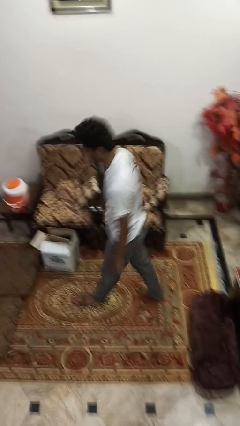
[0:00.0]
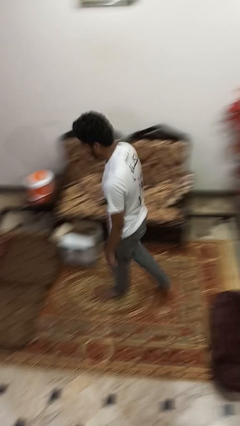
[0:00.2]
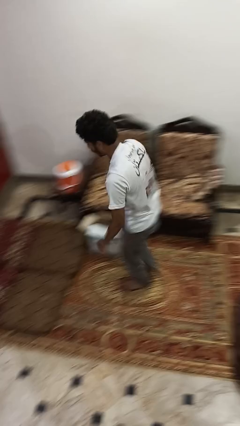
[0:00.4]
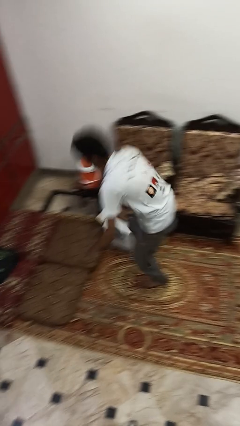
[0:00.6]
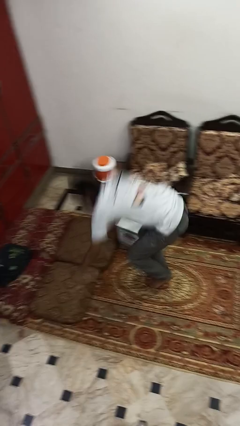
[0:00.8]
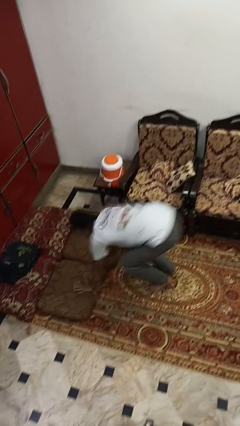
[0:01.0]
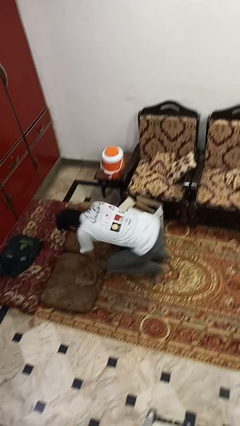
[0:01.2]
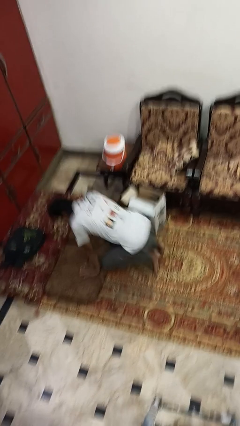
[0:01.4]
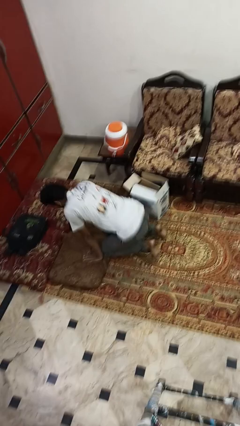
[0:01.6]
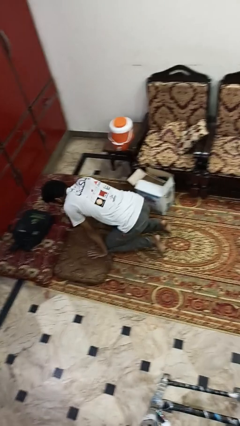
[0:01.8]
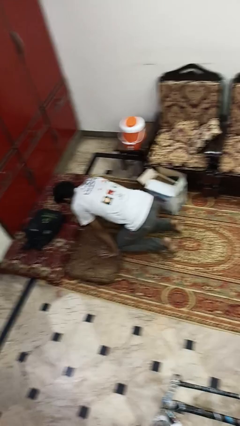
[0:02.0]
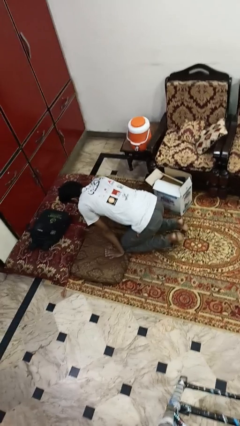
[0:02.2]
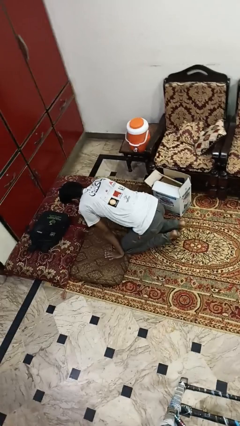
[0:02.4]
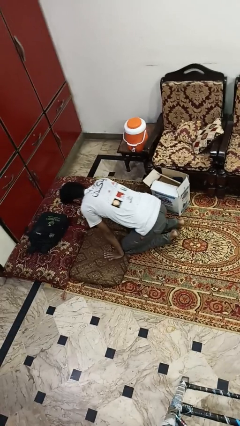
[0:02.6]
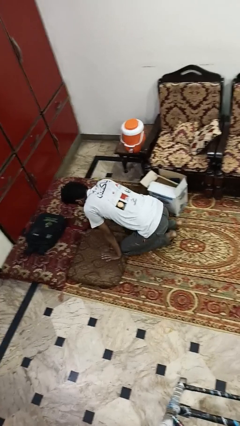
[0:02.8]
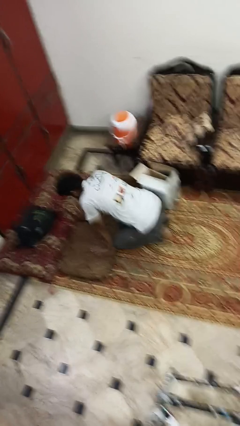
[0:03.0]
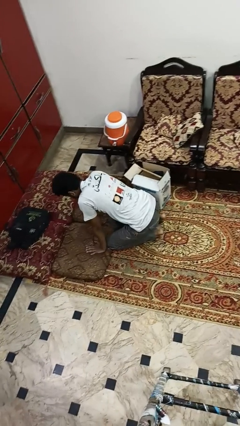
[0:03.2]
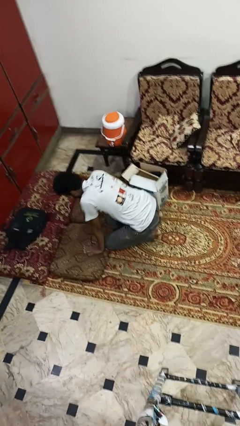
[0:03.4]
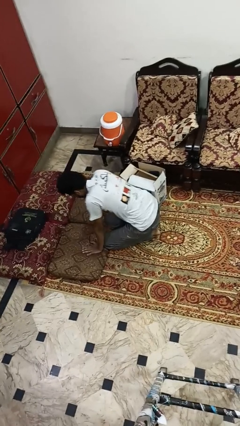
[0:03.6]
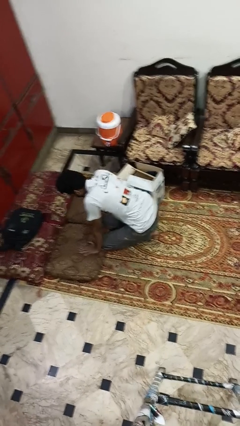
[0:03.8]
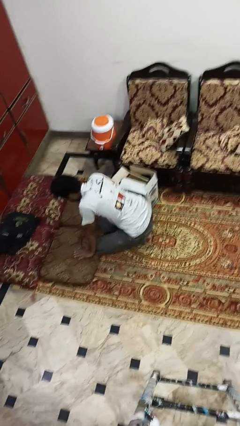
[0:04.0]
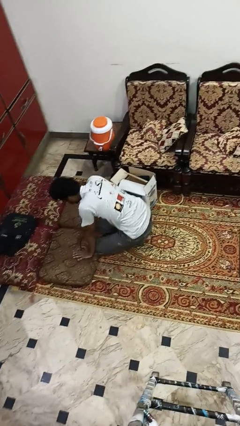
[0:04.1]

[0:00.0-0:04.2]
person trips on object on floor

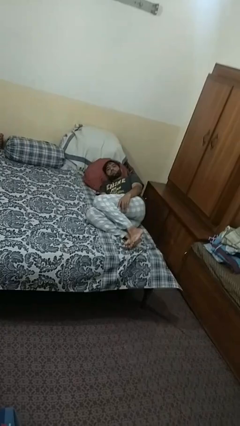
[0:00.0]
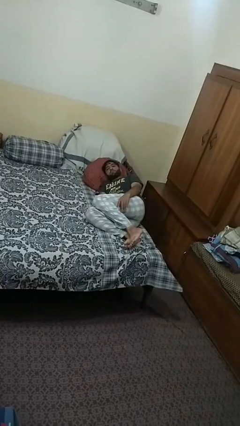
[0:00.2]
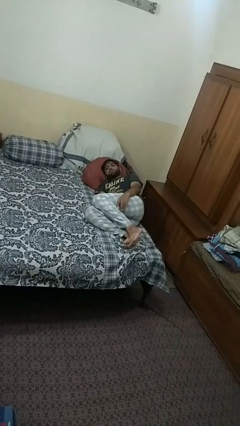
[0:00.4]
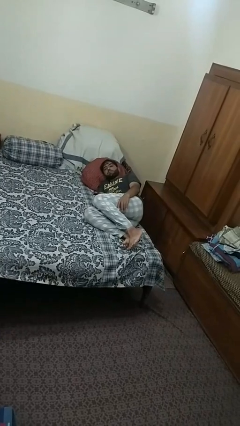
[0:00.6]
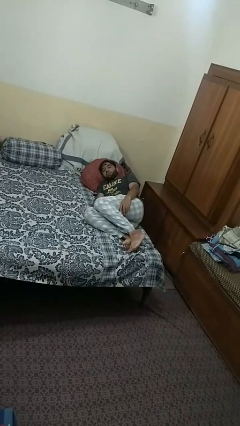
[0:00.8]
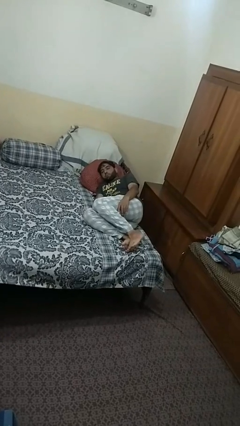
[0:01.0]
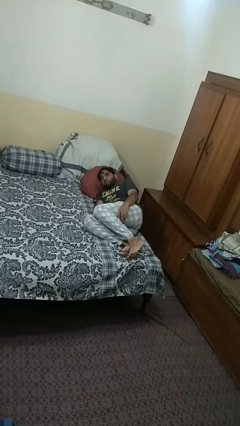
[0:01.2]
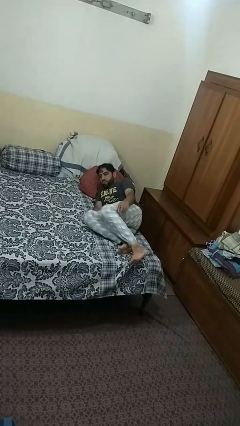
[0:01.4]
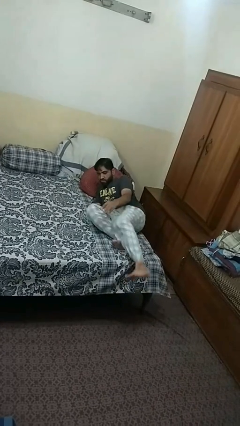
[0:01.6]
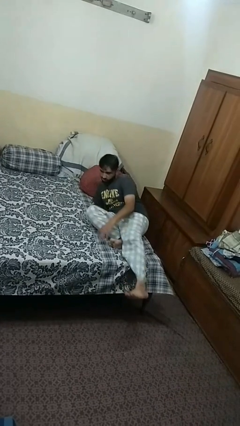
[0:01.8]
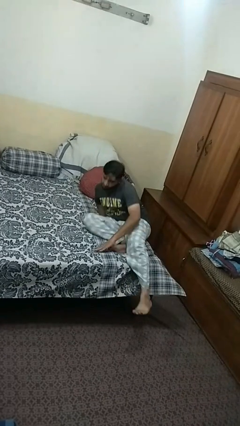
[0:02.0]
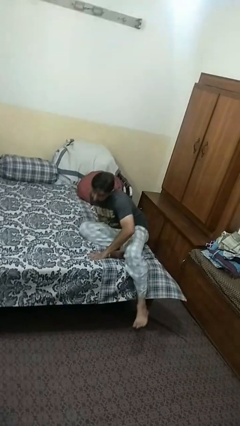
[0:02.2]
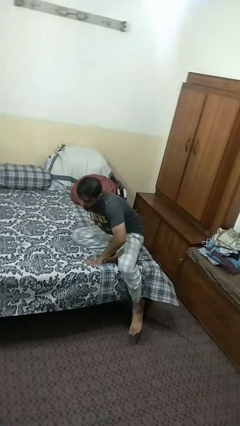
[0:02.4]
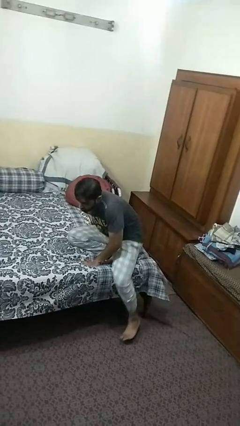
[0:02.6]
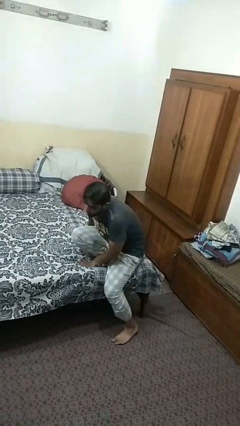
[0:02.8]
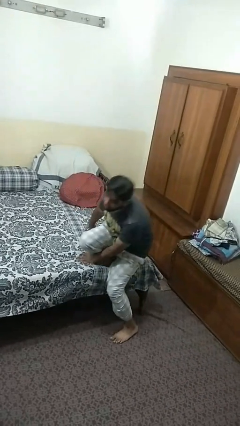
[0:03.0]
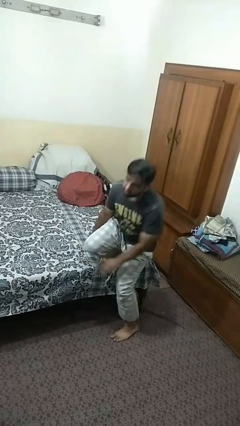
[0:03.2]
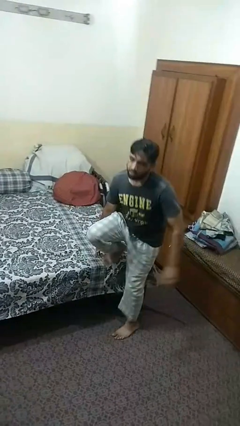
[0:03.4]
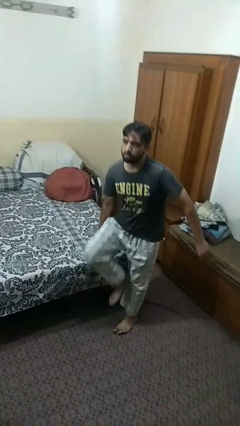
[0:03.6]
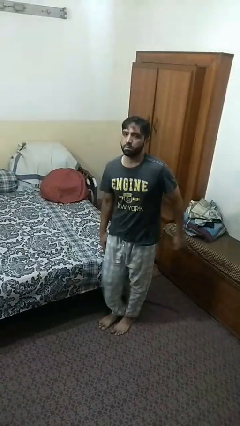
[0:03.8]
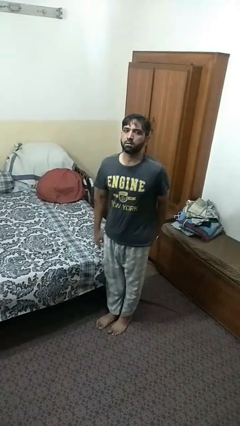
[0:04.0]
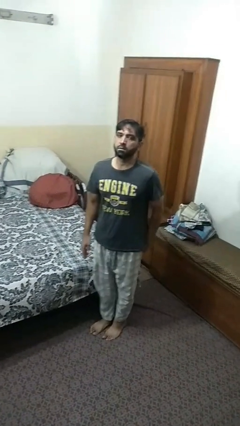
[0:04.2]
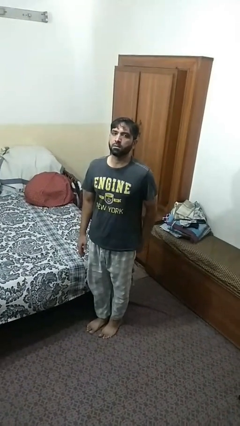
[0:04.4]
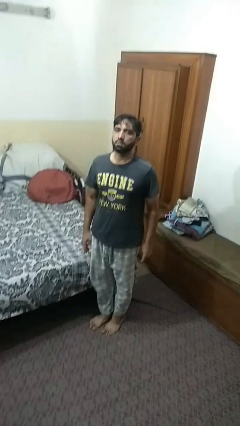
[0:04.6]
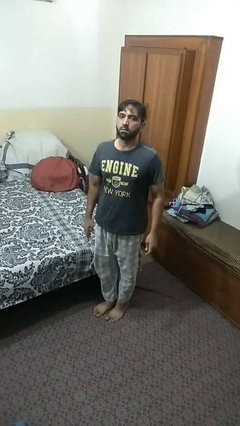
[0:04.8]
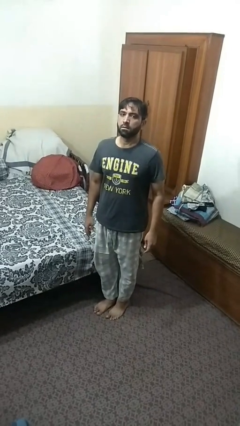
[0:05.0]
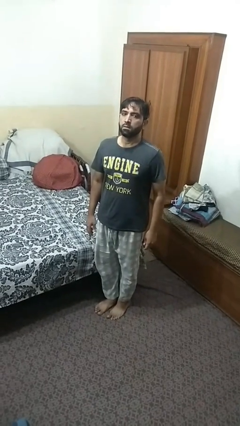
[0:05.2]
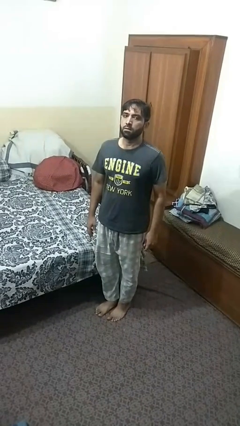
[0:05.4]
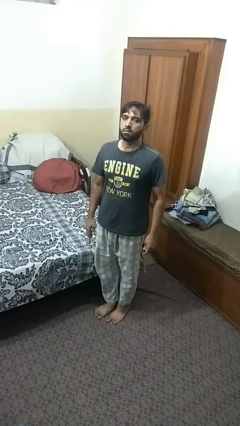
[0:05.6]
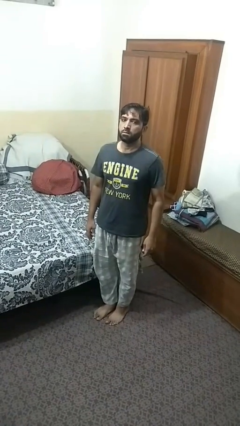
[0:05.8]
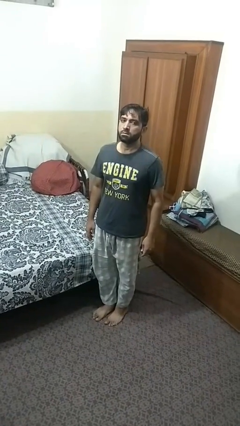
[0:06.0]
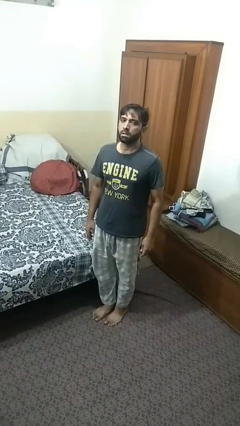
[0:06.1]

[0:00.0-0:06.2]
person stands up

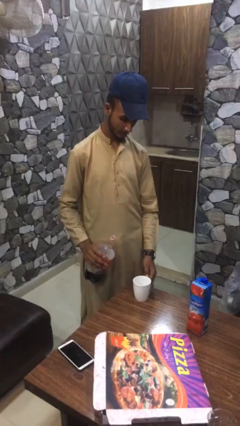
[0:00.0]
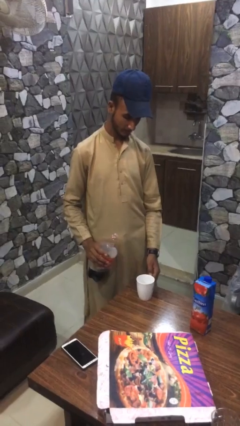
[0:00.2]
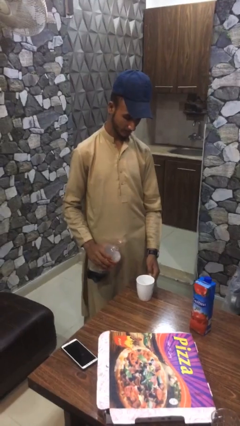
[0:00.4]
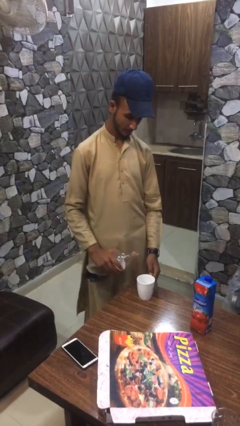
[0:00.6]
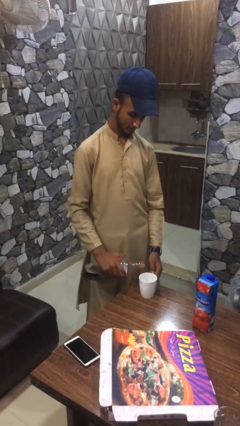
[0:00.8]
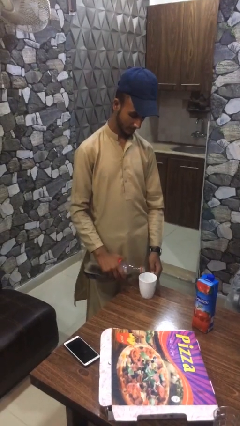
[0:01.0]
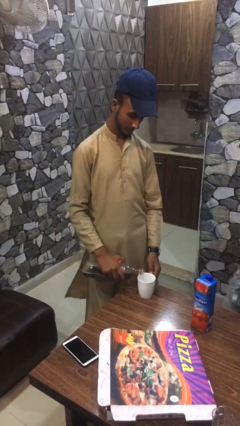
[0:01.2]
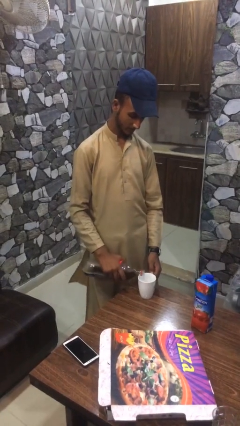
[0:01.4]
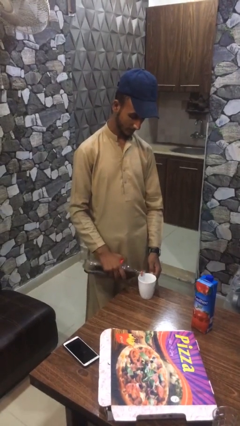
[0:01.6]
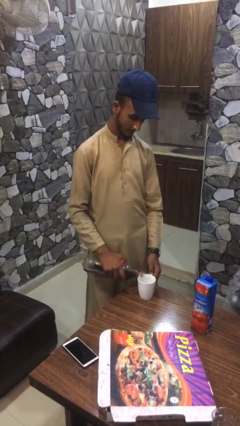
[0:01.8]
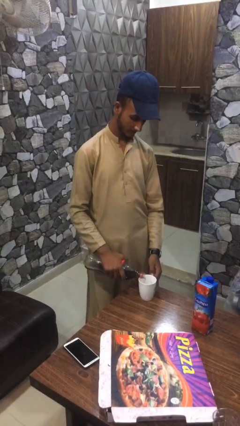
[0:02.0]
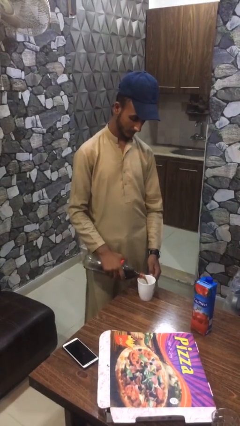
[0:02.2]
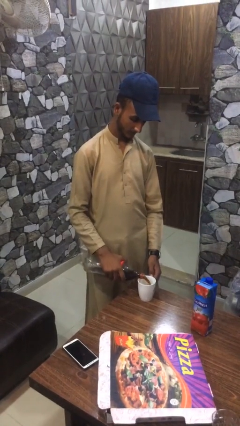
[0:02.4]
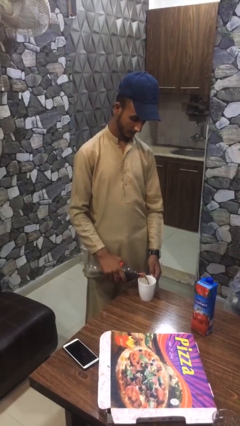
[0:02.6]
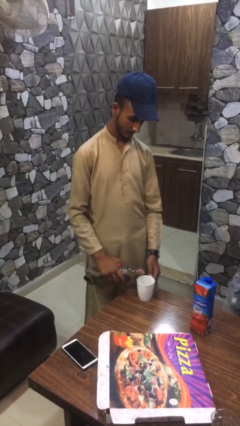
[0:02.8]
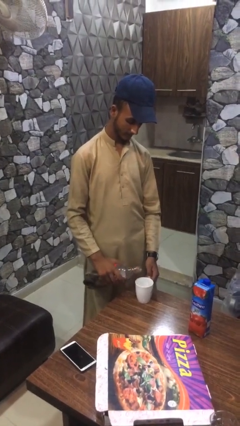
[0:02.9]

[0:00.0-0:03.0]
person pours coffee into mug

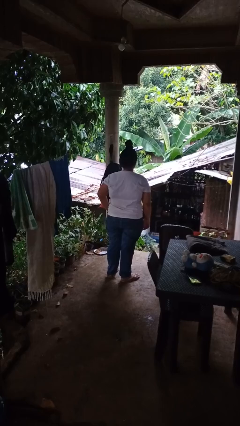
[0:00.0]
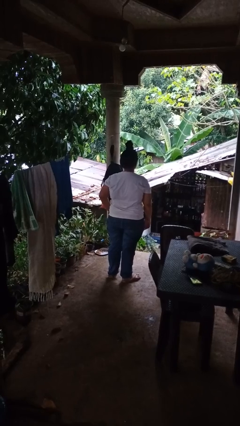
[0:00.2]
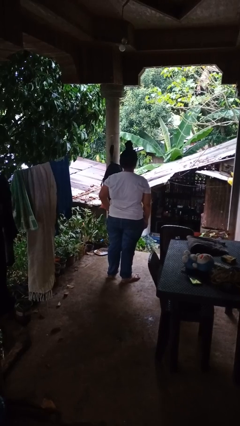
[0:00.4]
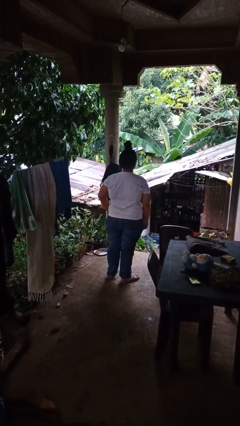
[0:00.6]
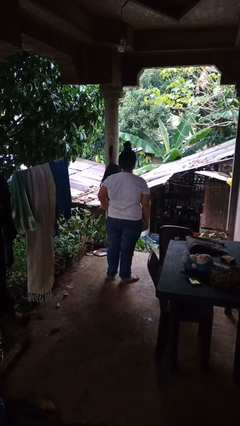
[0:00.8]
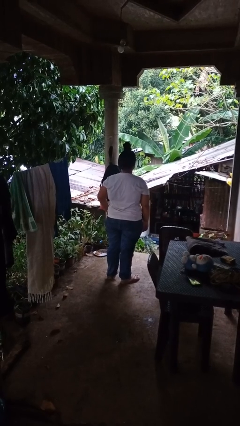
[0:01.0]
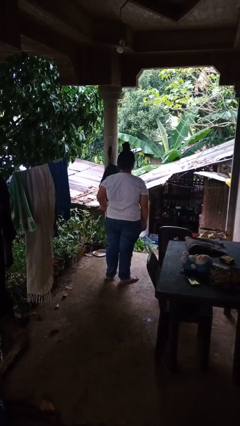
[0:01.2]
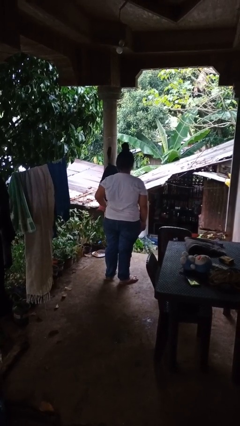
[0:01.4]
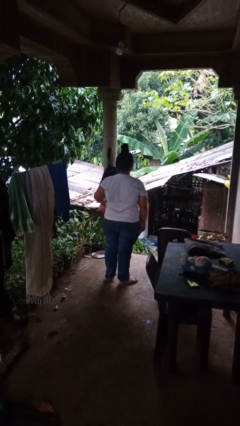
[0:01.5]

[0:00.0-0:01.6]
person puts hands in back pockets

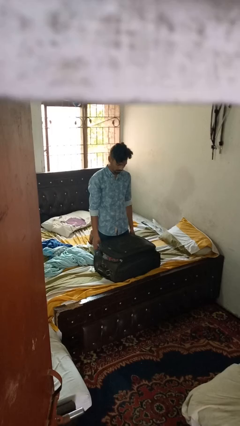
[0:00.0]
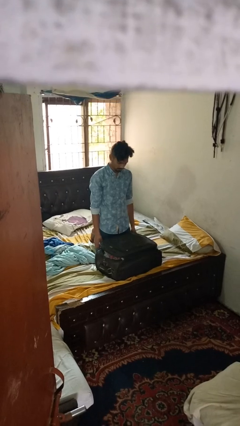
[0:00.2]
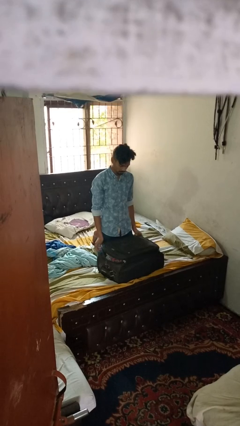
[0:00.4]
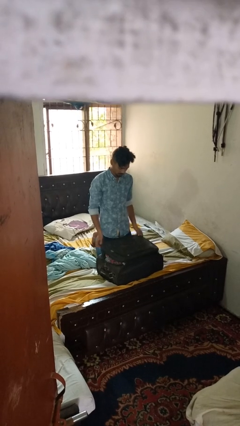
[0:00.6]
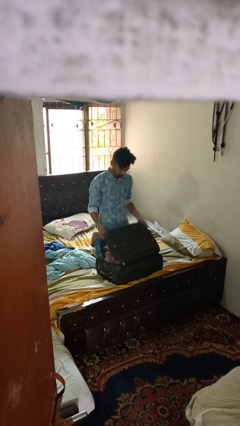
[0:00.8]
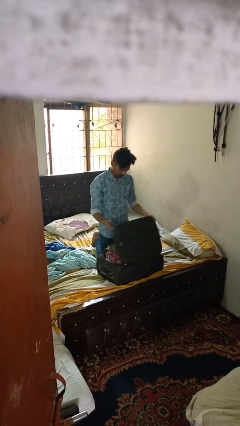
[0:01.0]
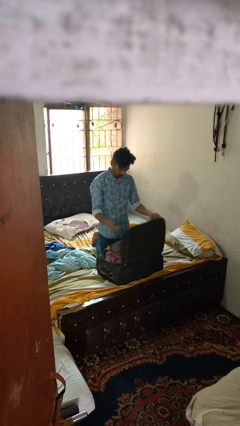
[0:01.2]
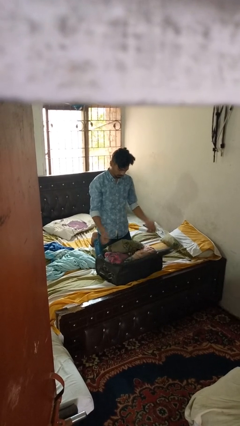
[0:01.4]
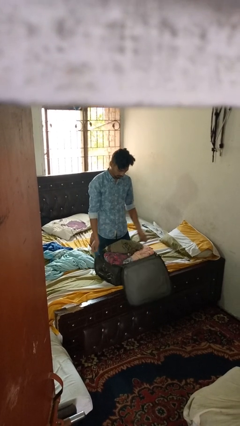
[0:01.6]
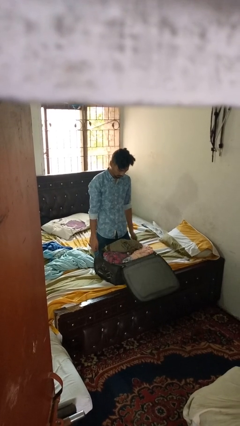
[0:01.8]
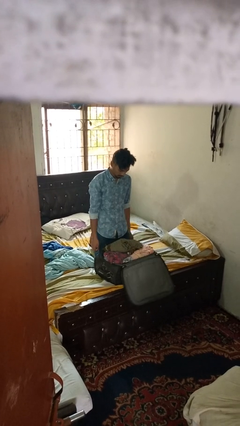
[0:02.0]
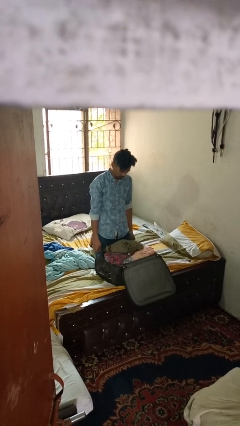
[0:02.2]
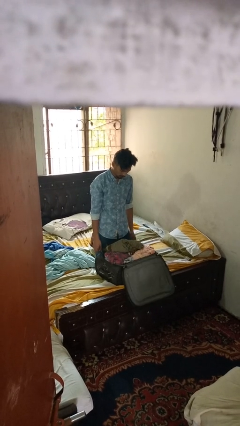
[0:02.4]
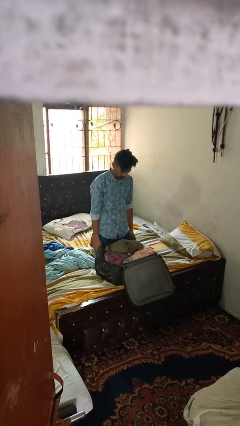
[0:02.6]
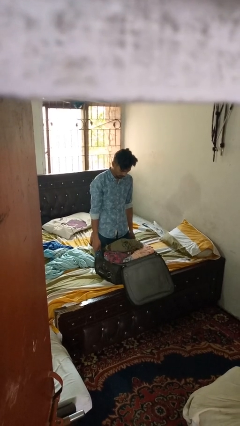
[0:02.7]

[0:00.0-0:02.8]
person opens suitcase
